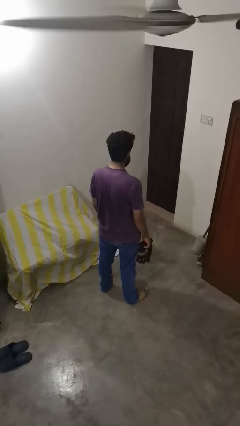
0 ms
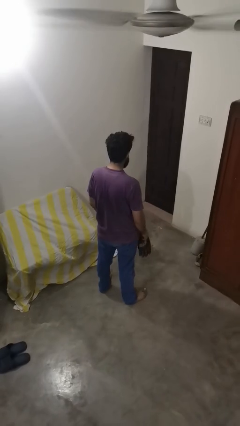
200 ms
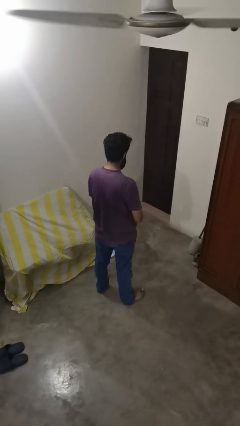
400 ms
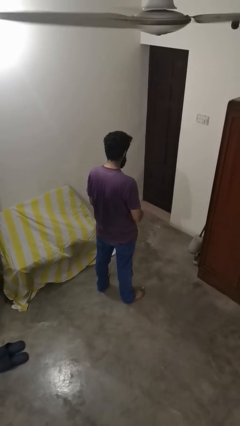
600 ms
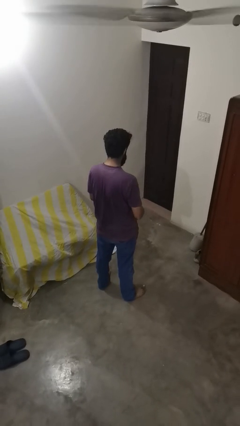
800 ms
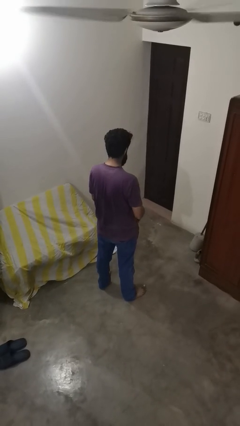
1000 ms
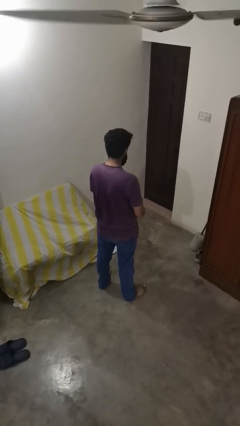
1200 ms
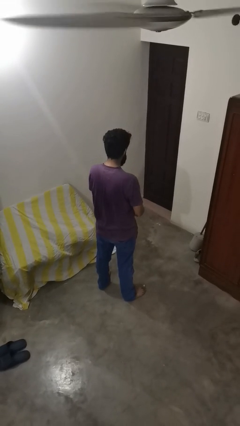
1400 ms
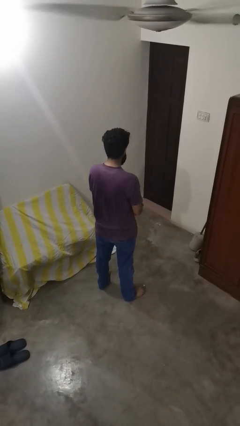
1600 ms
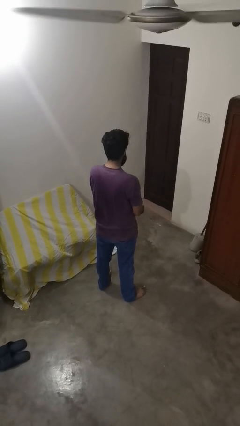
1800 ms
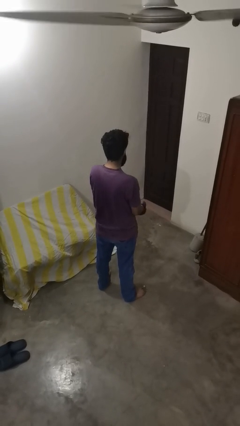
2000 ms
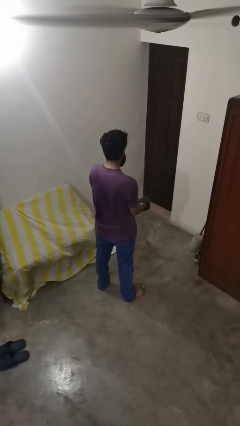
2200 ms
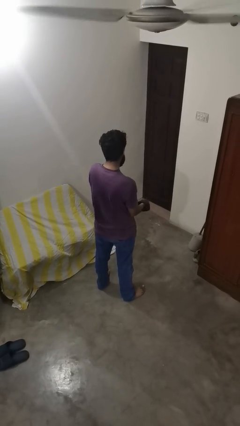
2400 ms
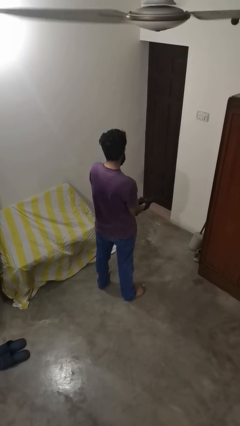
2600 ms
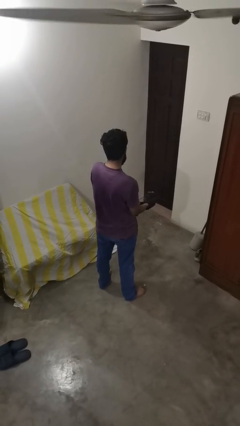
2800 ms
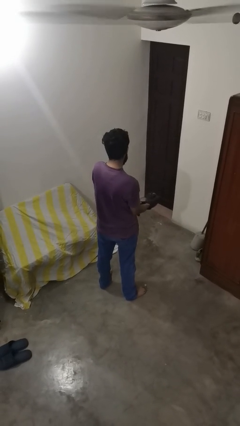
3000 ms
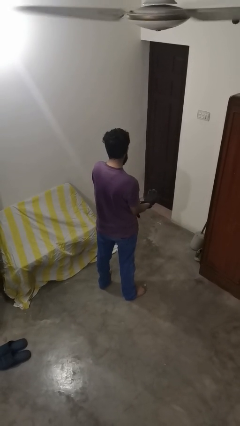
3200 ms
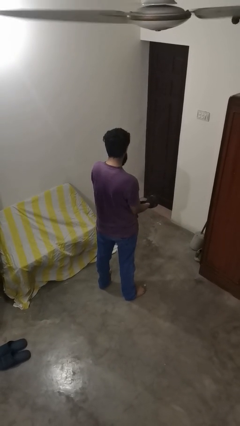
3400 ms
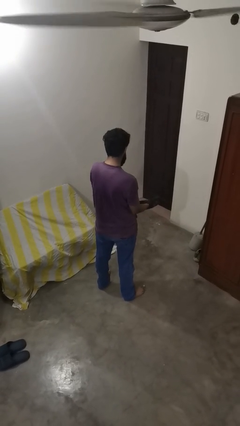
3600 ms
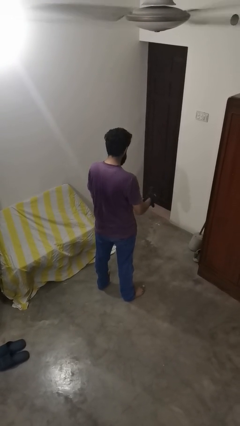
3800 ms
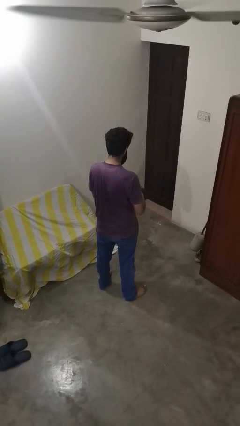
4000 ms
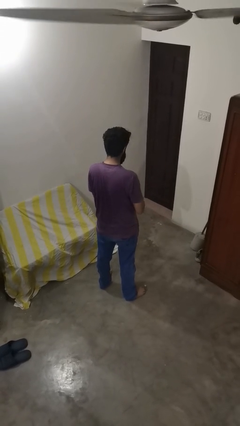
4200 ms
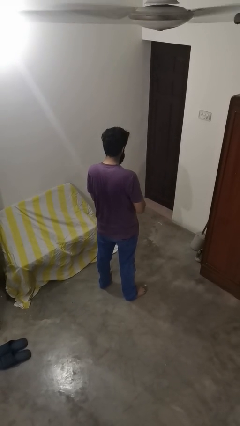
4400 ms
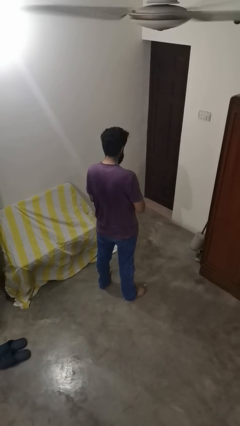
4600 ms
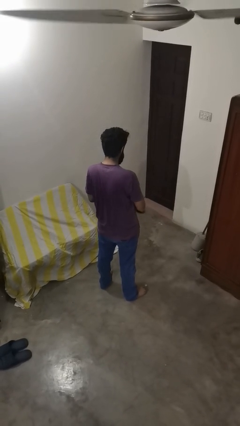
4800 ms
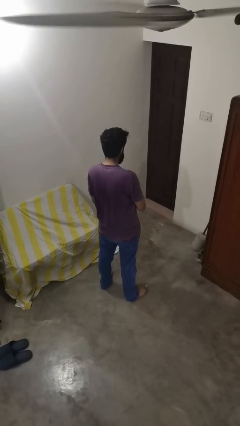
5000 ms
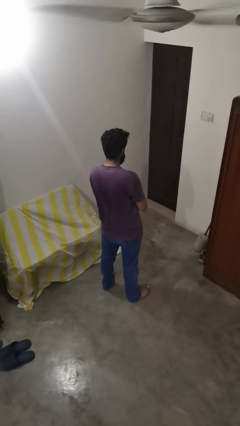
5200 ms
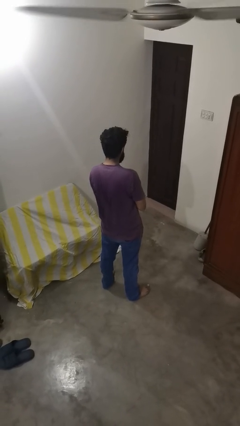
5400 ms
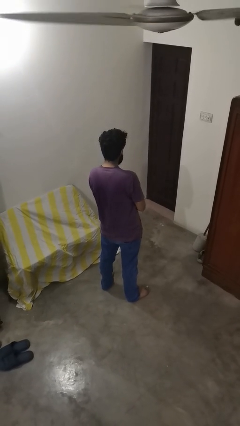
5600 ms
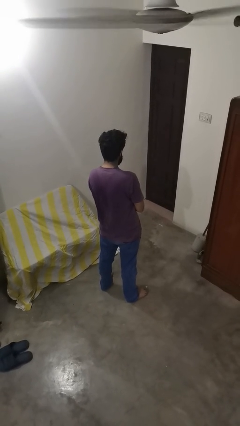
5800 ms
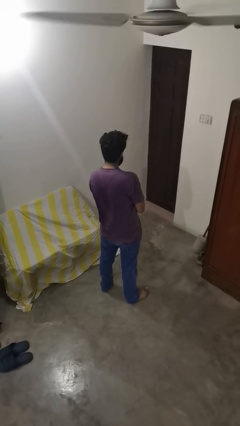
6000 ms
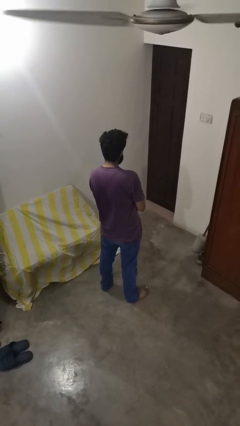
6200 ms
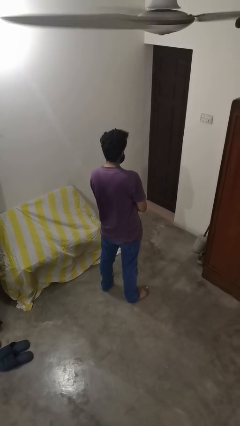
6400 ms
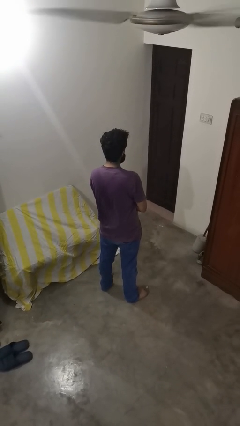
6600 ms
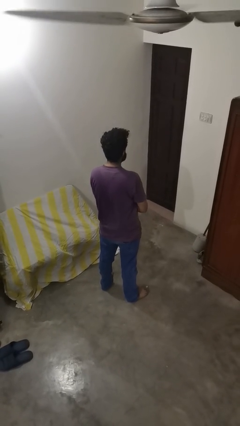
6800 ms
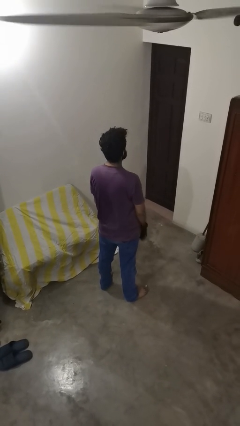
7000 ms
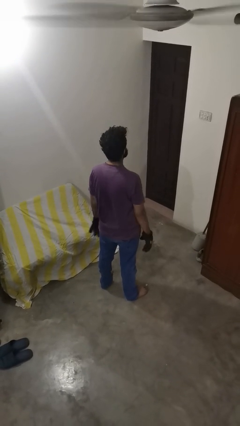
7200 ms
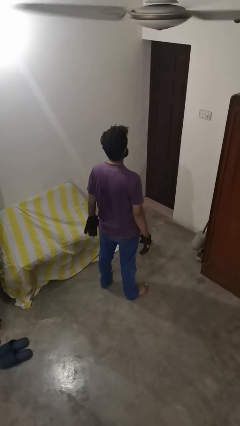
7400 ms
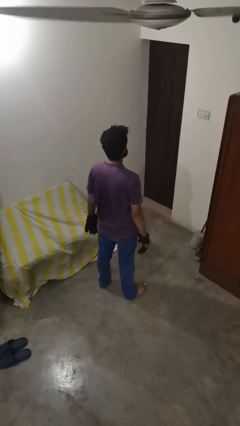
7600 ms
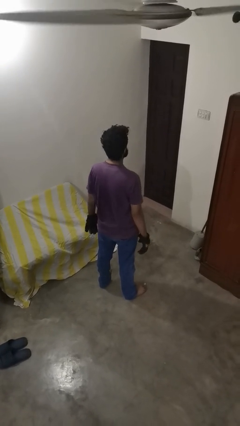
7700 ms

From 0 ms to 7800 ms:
person puts on gloves

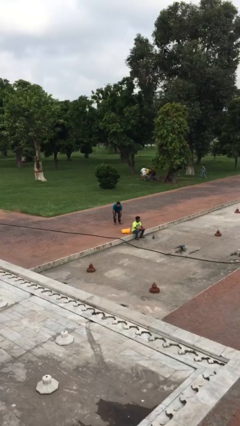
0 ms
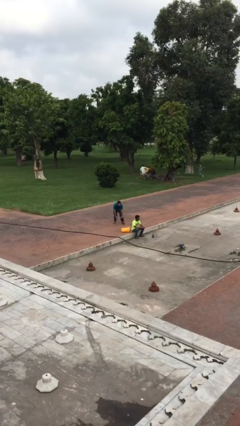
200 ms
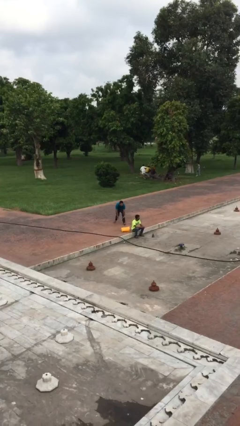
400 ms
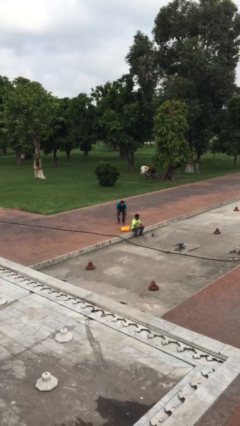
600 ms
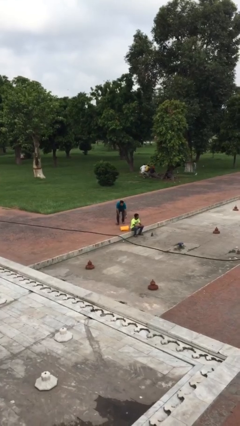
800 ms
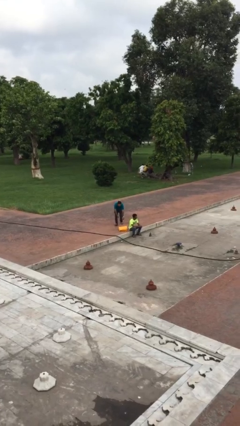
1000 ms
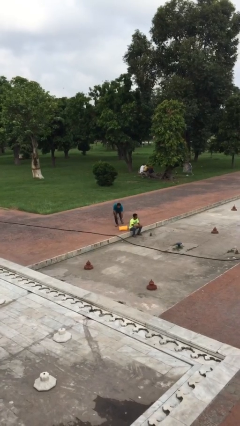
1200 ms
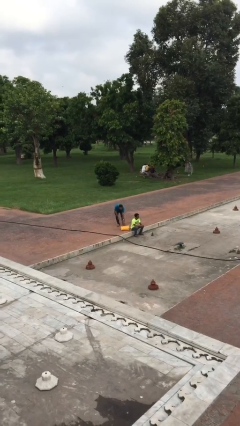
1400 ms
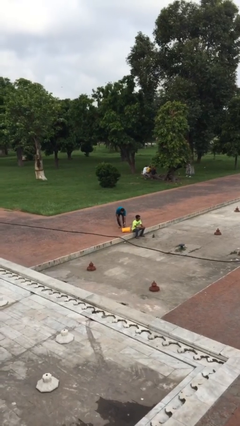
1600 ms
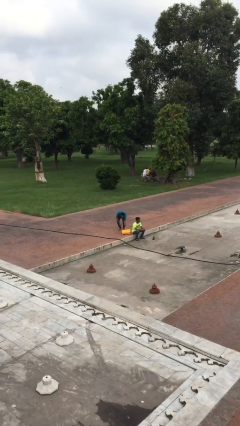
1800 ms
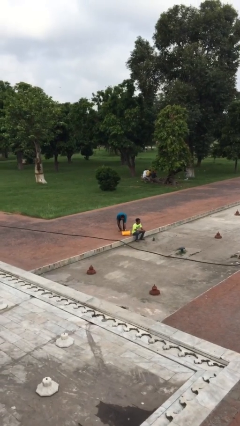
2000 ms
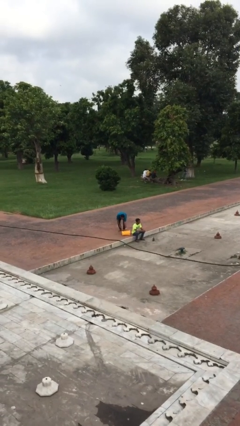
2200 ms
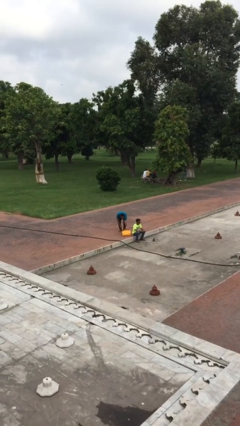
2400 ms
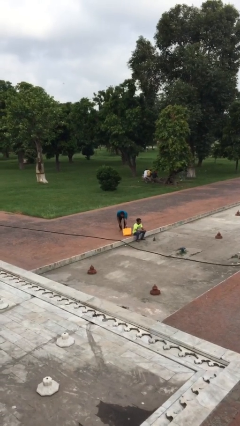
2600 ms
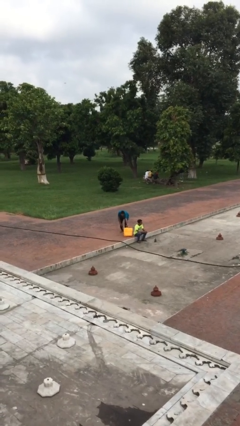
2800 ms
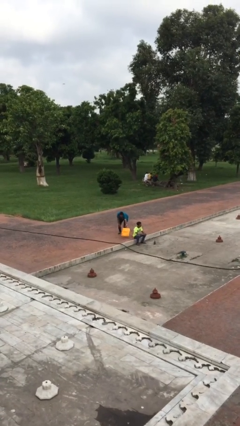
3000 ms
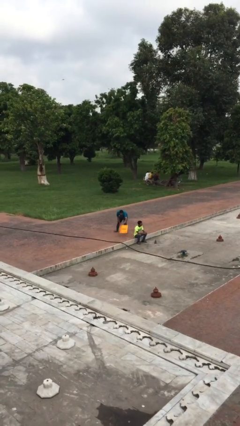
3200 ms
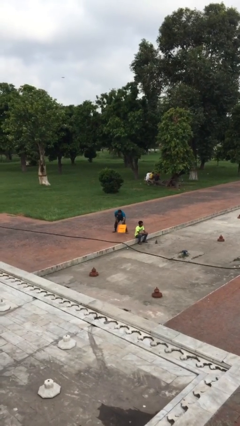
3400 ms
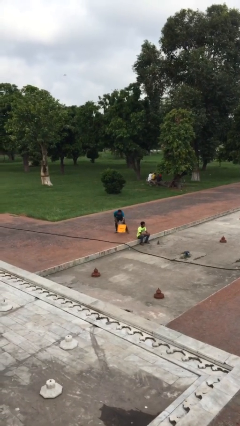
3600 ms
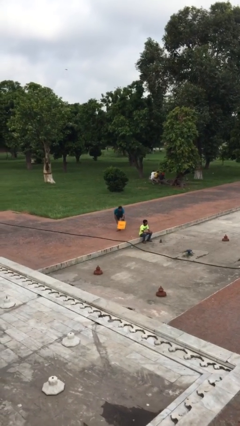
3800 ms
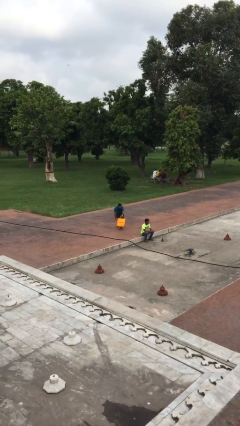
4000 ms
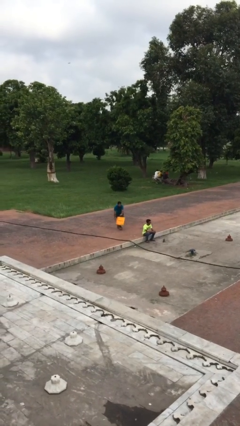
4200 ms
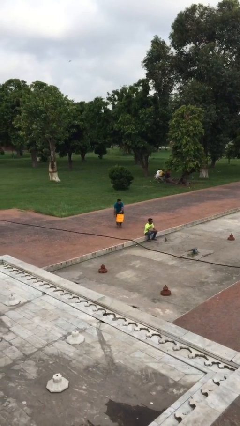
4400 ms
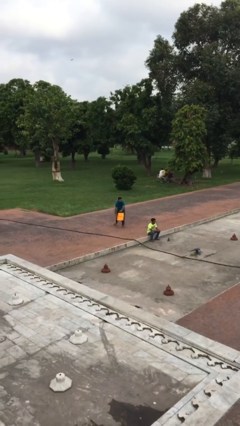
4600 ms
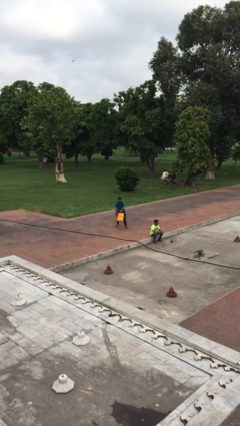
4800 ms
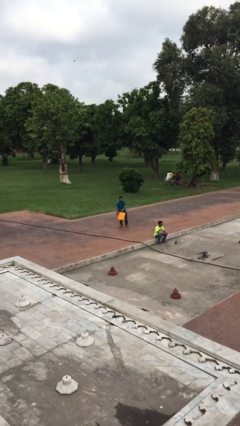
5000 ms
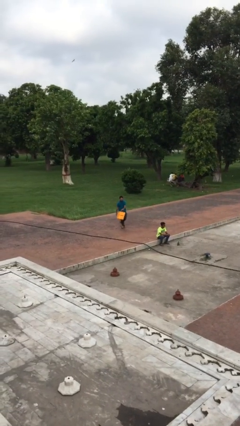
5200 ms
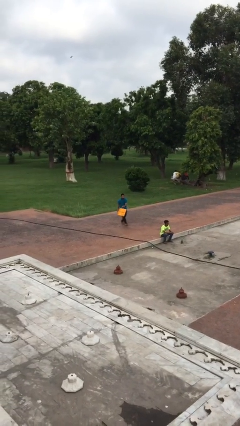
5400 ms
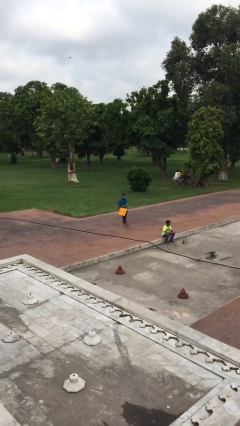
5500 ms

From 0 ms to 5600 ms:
person steals object from person

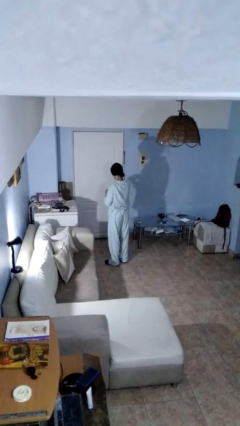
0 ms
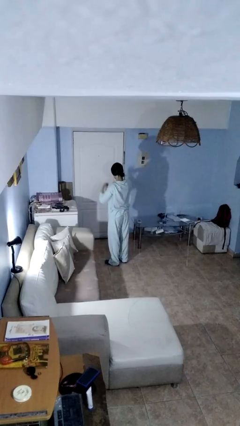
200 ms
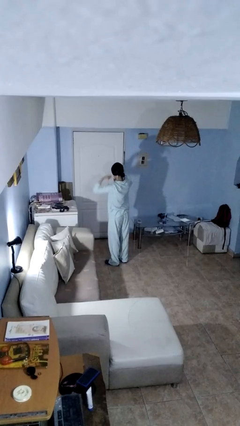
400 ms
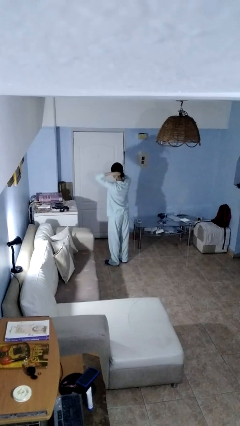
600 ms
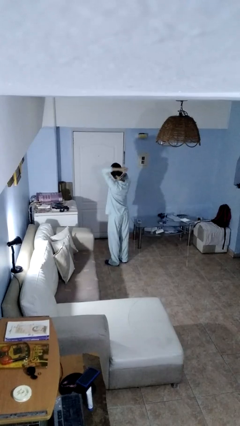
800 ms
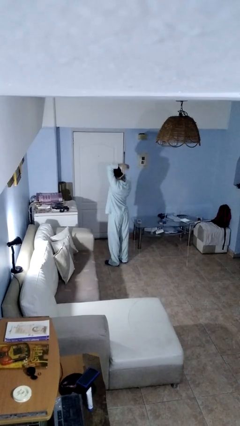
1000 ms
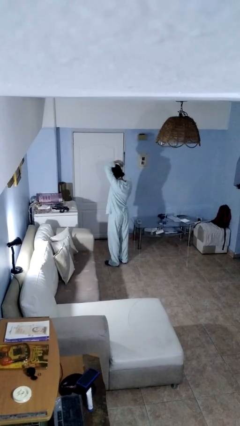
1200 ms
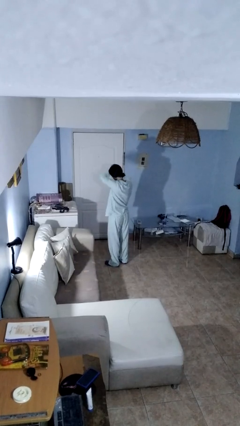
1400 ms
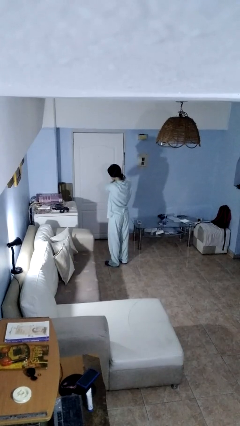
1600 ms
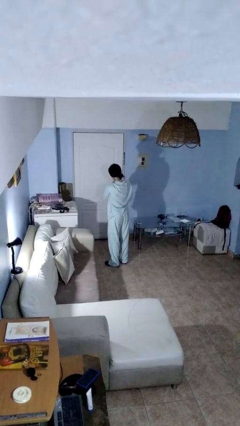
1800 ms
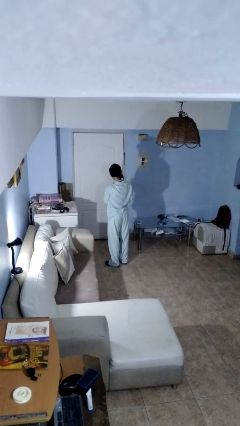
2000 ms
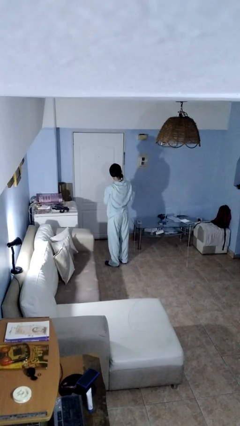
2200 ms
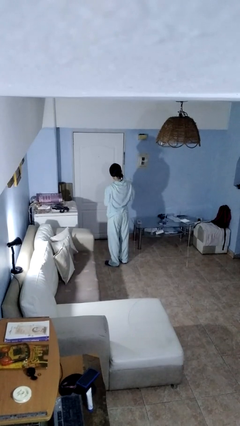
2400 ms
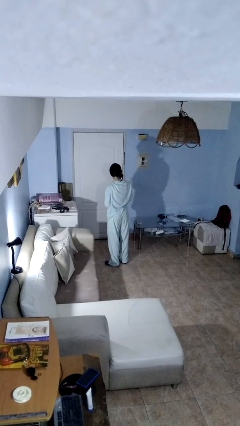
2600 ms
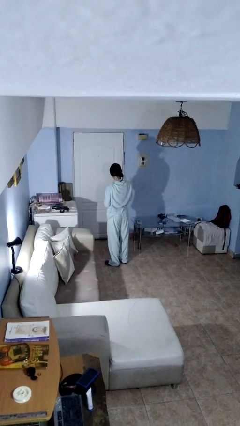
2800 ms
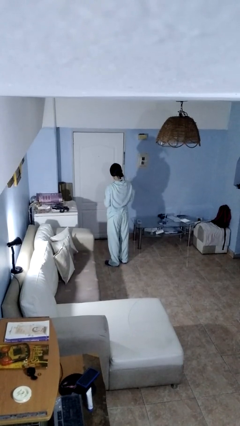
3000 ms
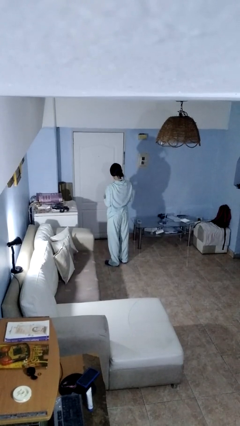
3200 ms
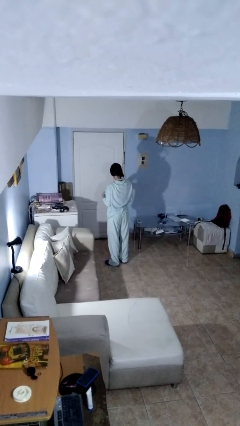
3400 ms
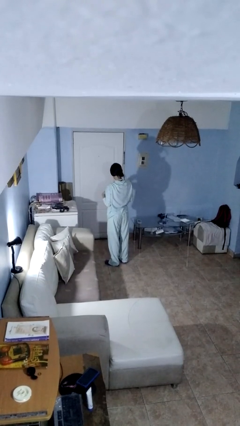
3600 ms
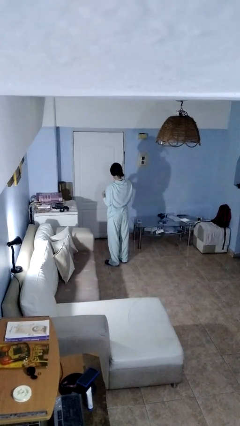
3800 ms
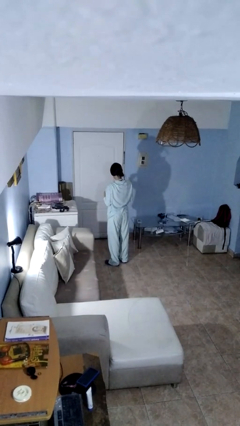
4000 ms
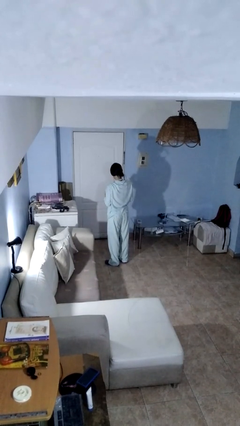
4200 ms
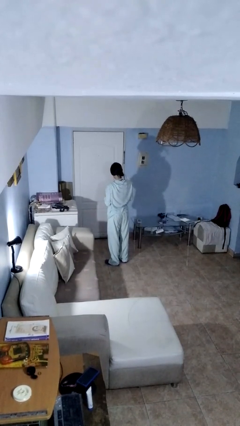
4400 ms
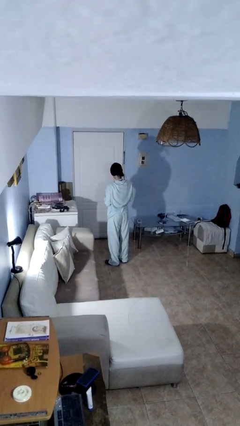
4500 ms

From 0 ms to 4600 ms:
person puts on necklace
